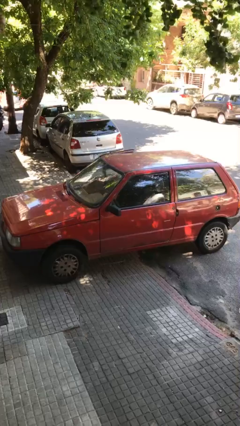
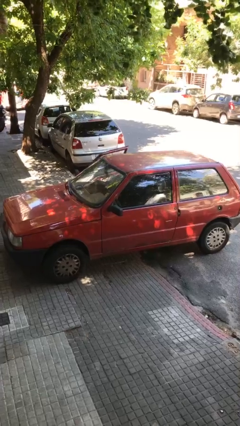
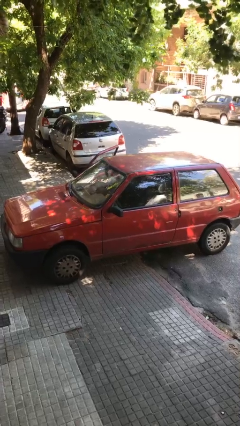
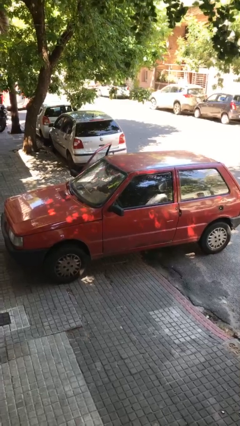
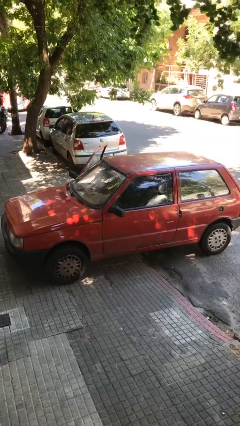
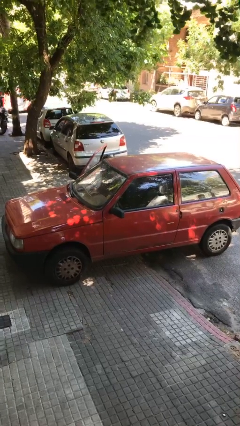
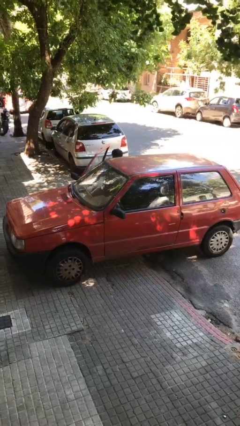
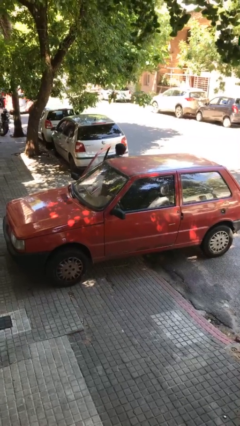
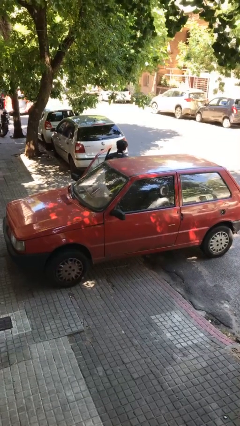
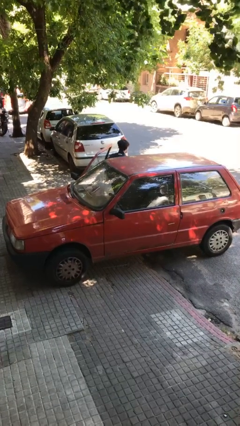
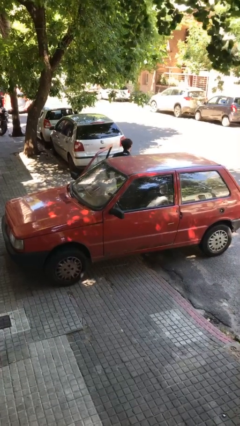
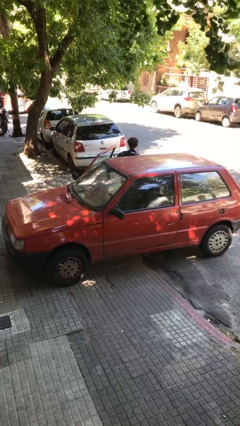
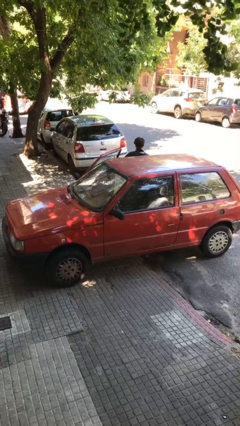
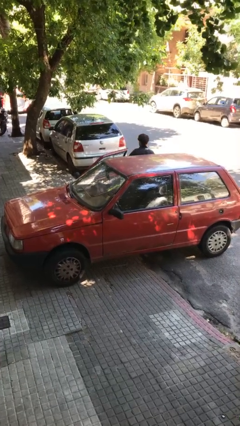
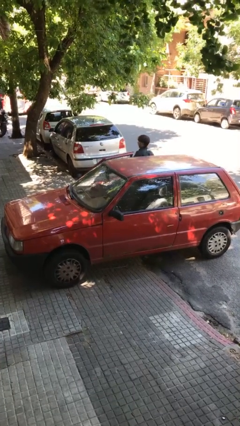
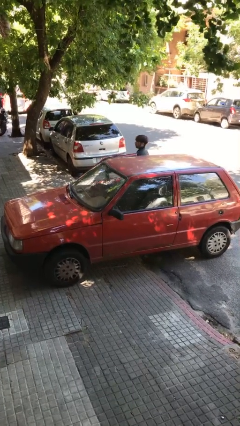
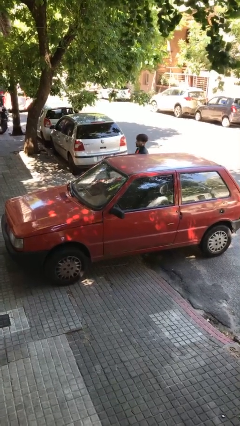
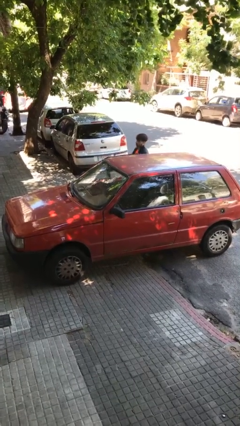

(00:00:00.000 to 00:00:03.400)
car drops off person

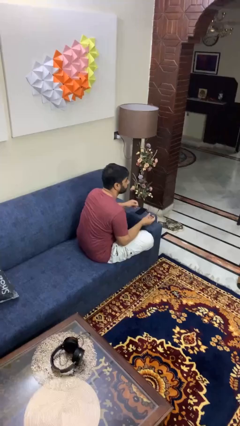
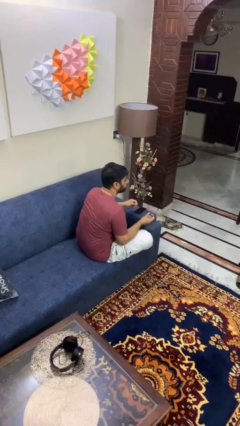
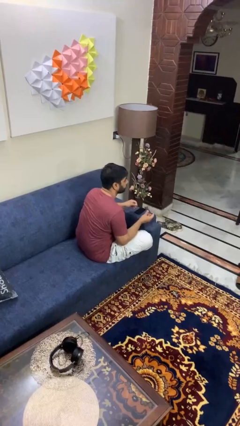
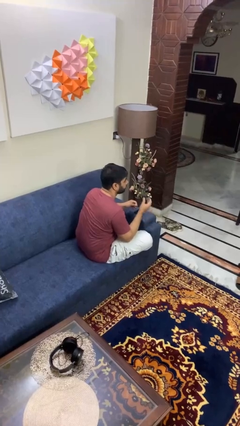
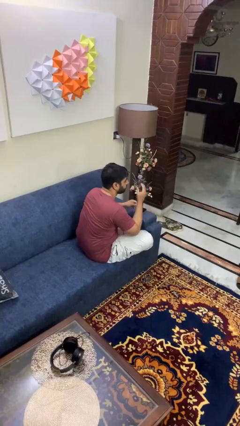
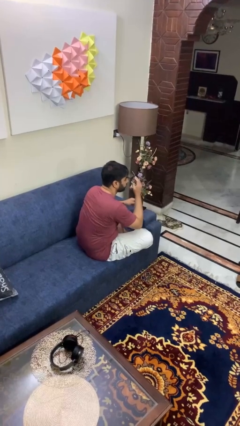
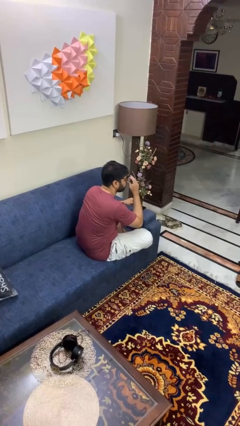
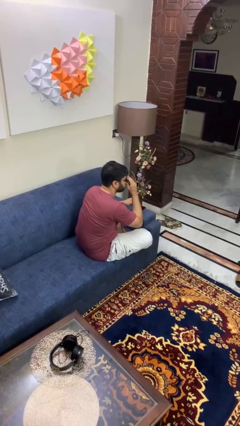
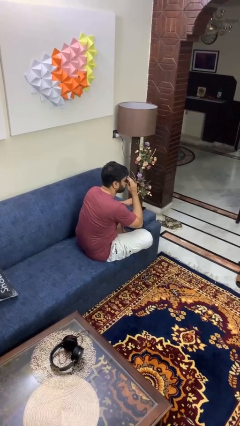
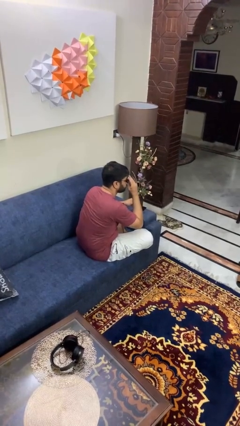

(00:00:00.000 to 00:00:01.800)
person puts on glasses

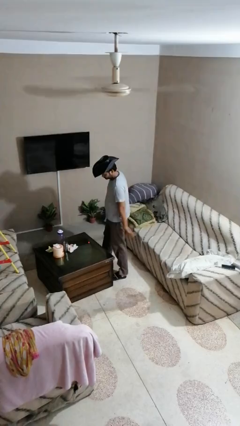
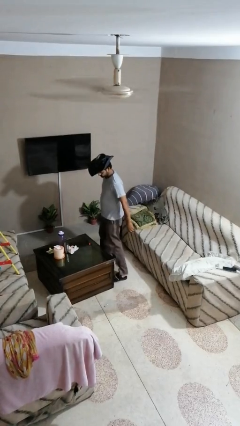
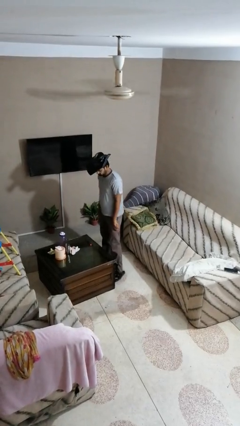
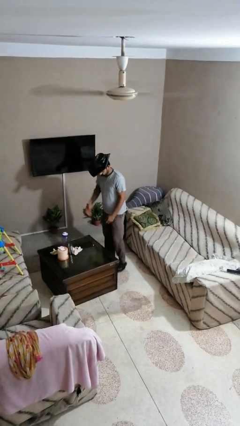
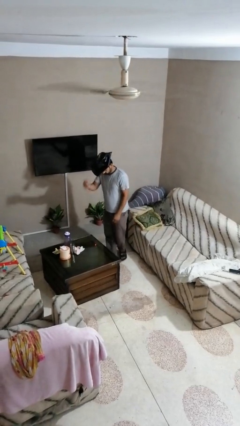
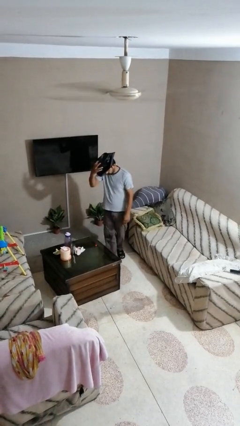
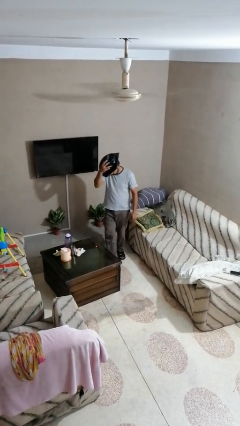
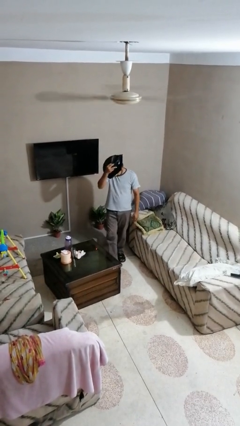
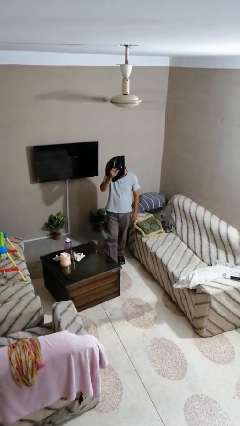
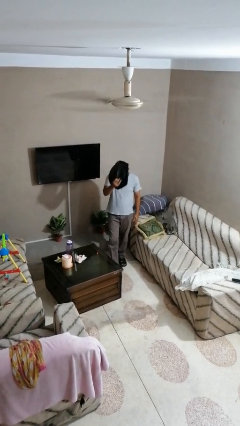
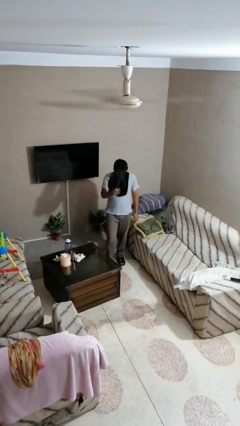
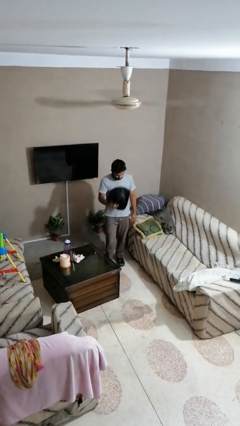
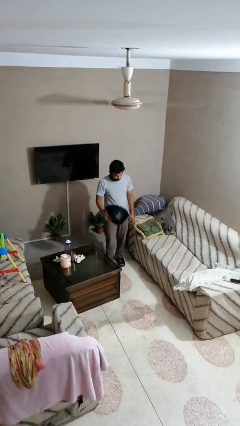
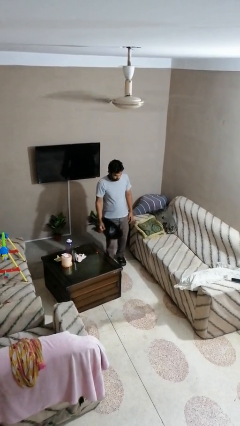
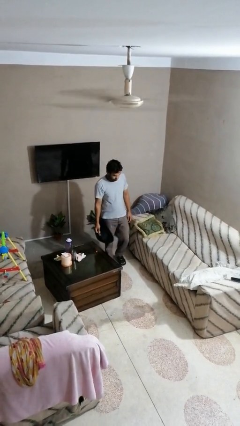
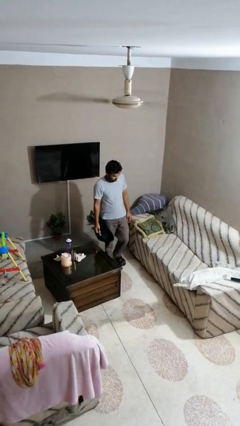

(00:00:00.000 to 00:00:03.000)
person takes off hat

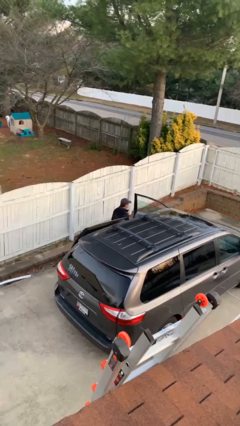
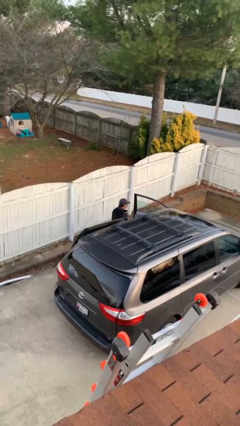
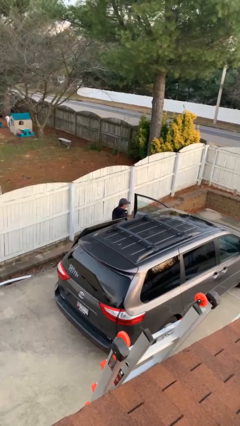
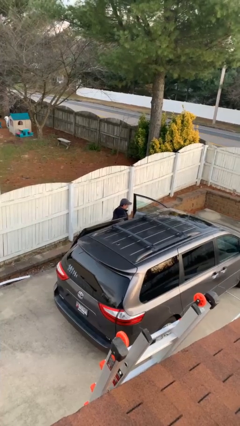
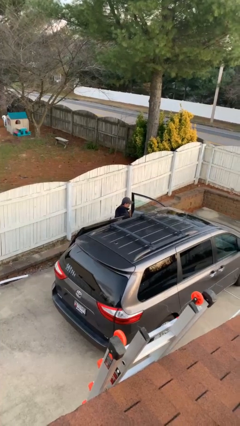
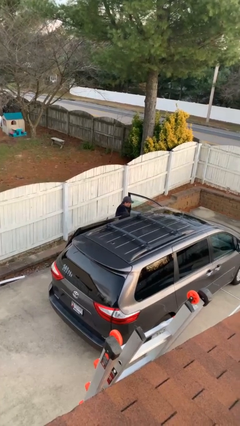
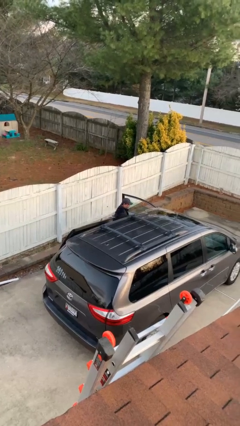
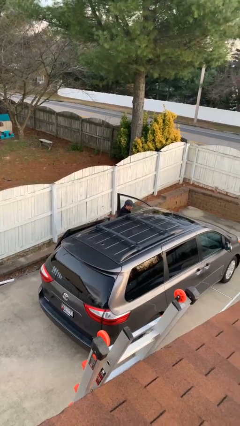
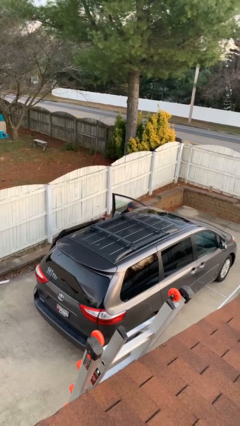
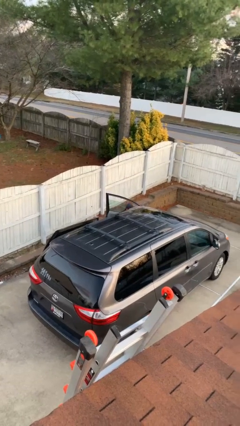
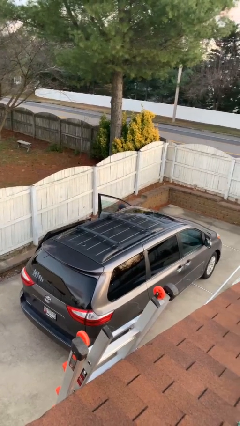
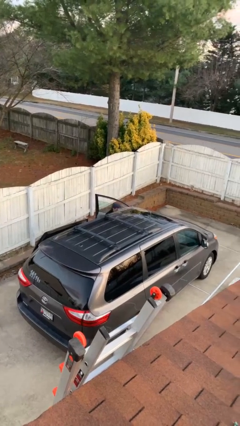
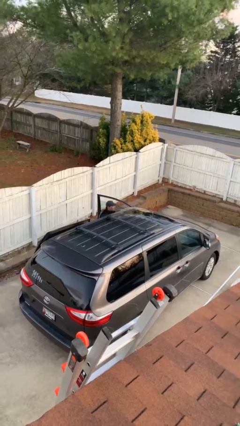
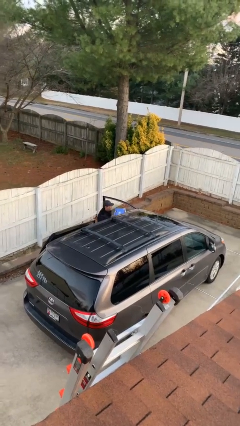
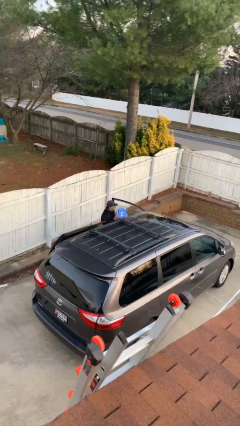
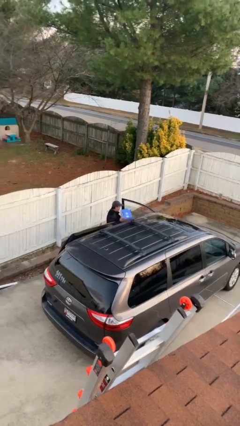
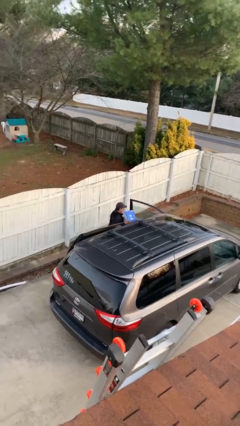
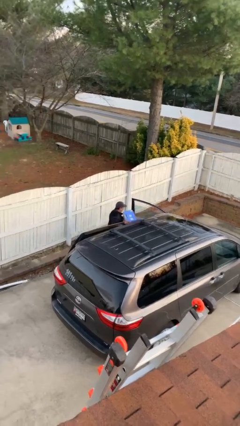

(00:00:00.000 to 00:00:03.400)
person unloads car

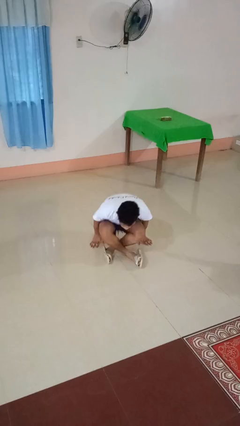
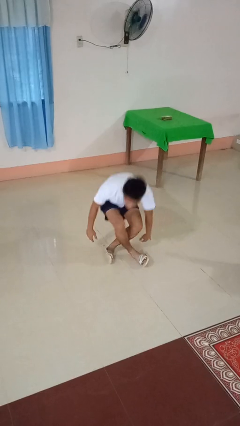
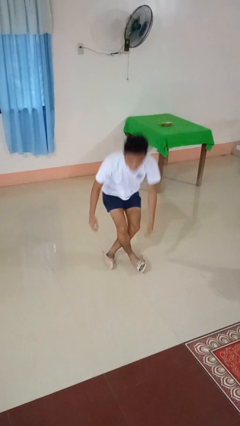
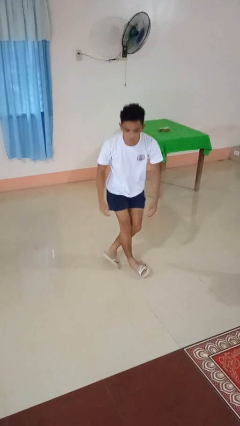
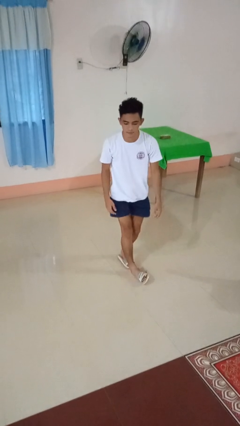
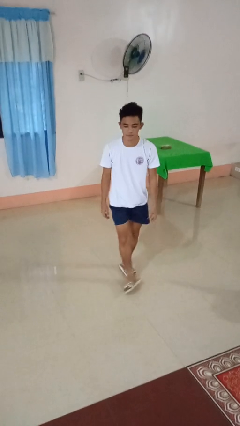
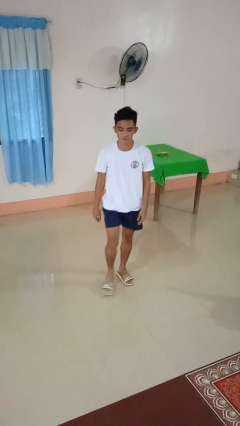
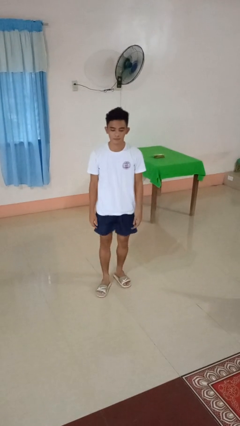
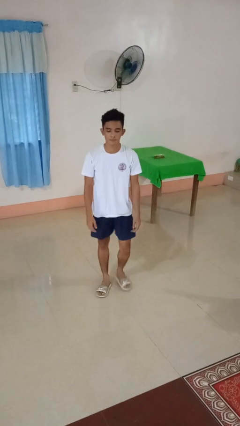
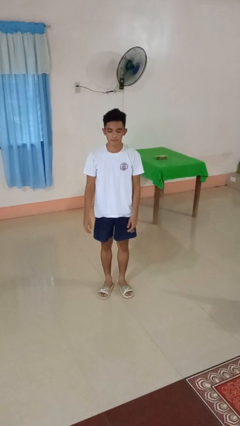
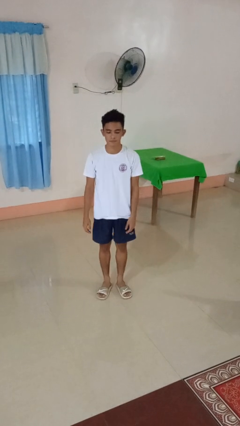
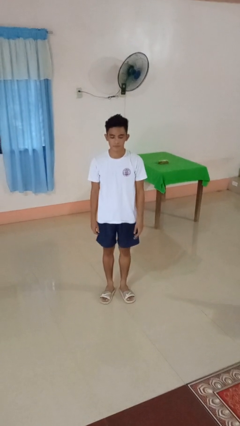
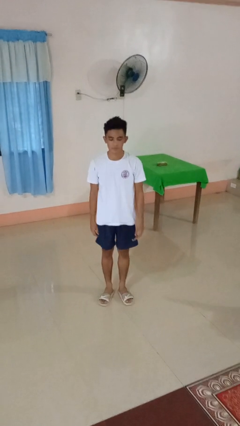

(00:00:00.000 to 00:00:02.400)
person stands up from floor

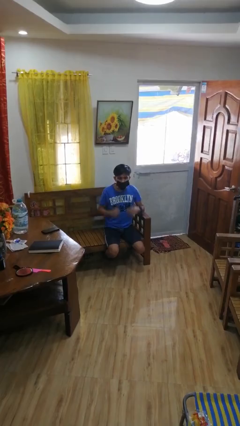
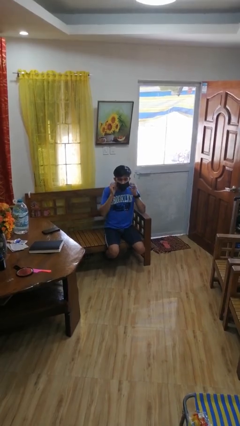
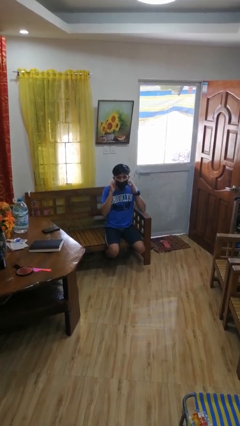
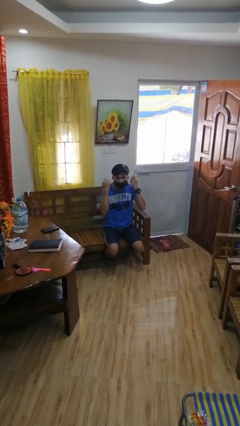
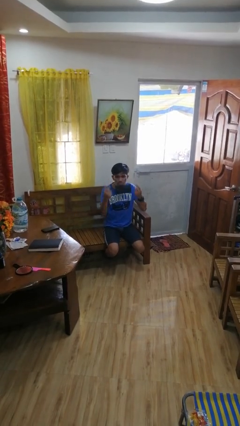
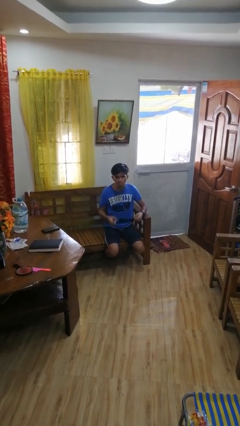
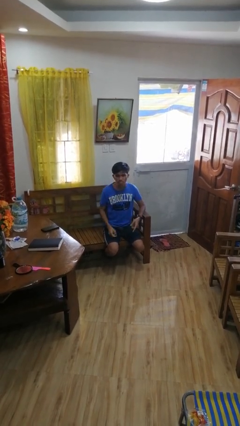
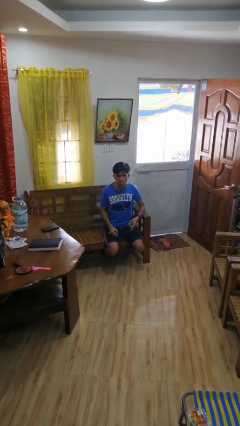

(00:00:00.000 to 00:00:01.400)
person takes off facemask

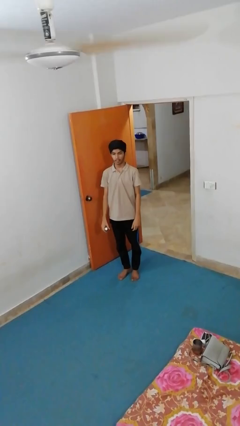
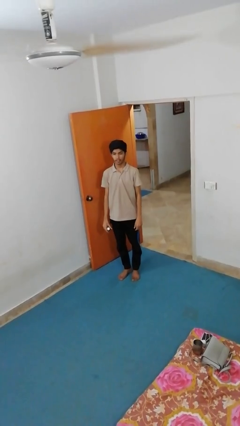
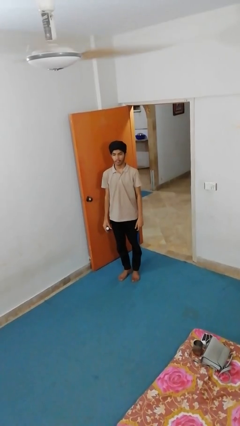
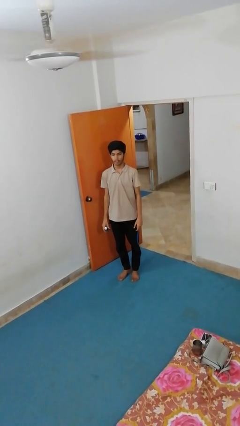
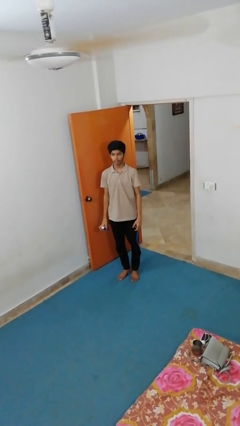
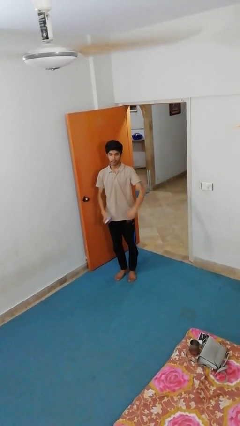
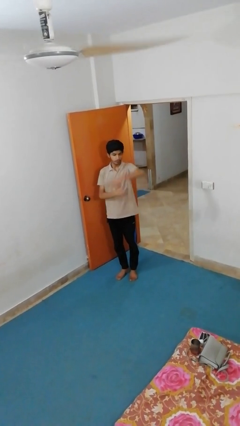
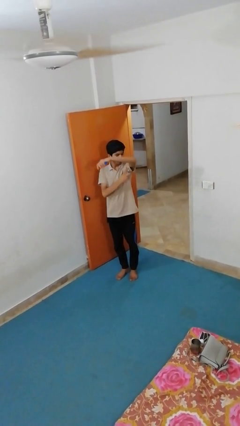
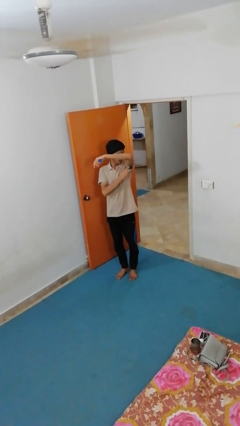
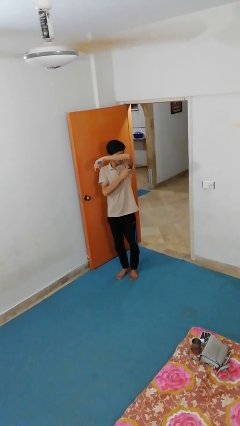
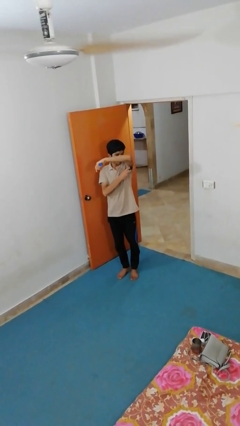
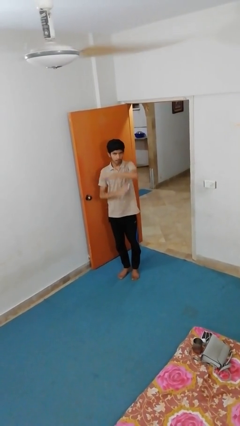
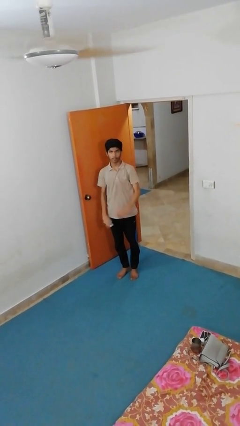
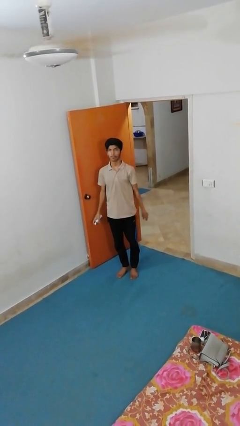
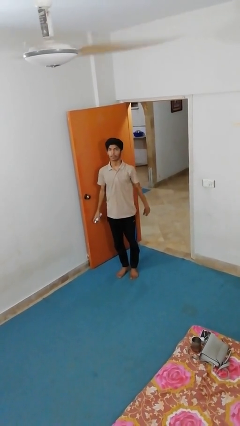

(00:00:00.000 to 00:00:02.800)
person applies deodorant
